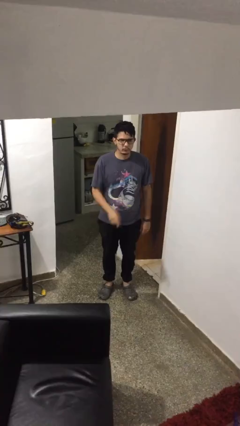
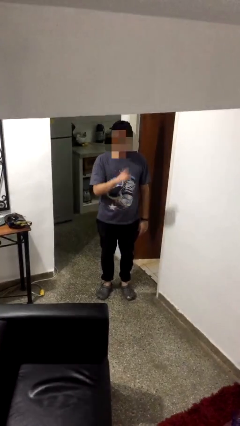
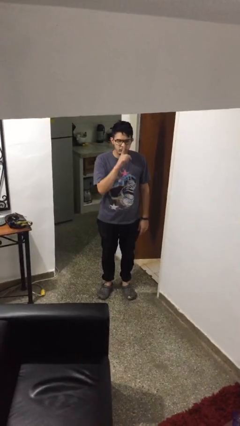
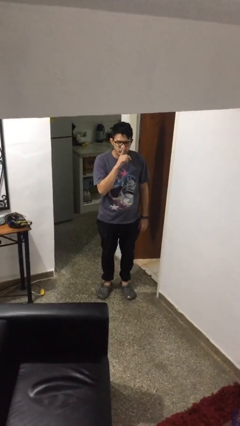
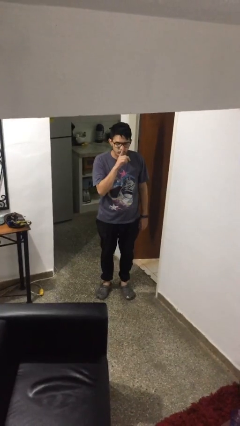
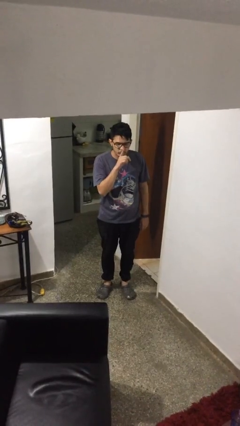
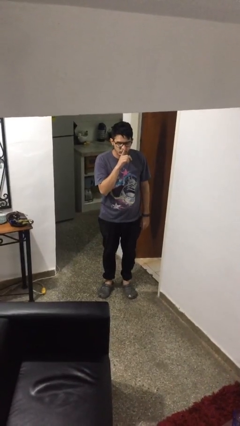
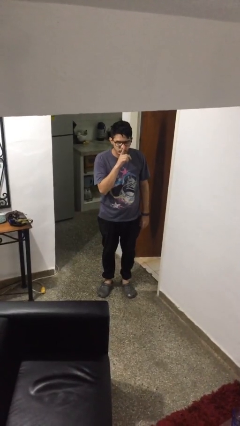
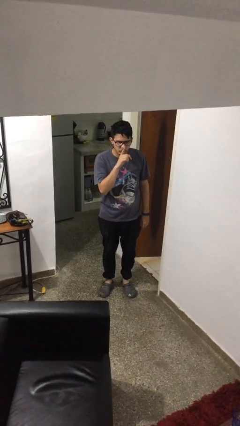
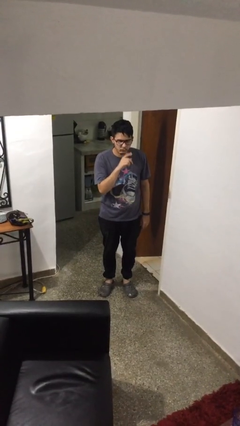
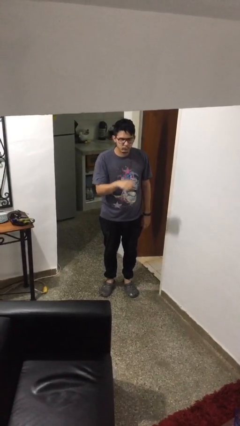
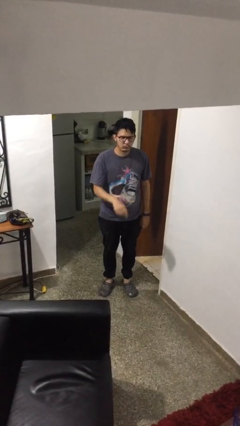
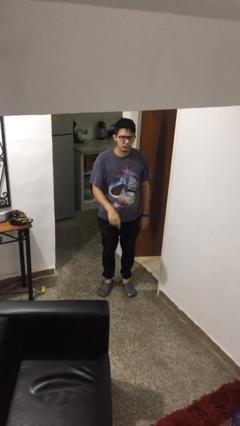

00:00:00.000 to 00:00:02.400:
person gestures be quiet

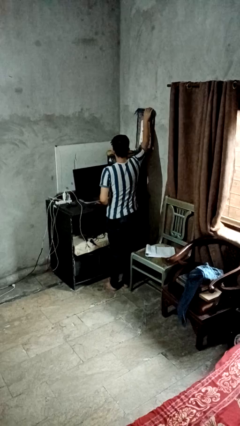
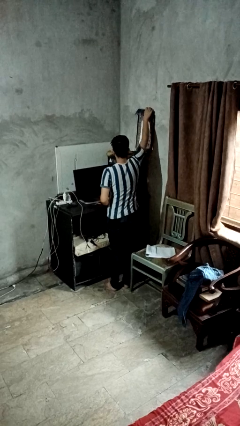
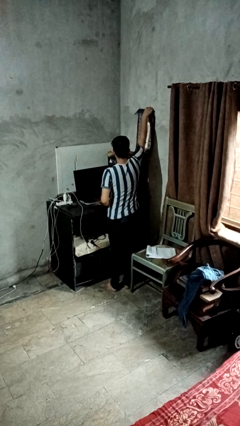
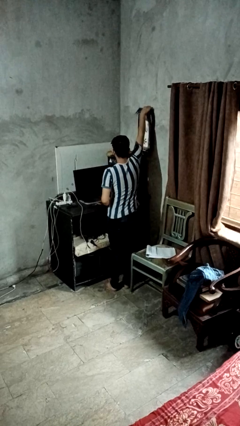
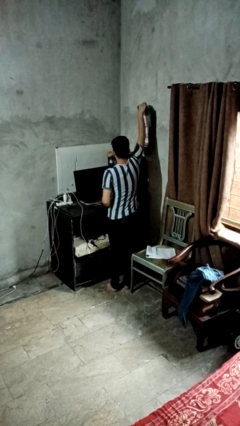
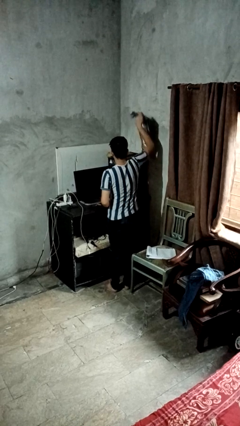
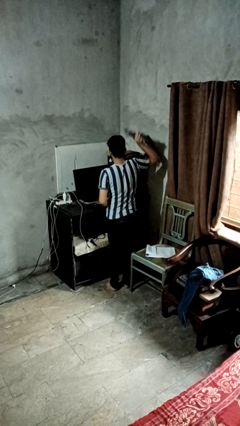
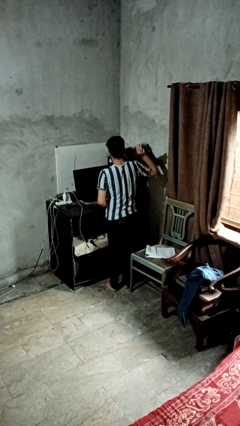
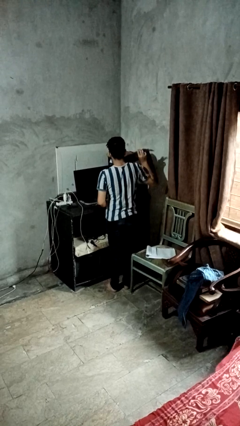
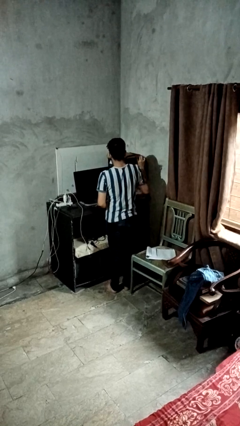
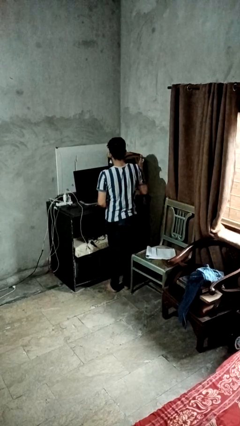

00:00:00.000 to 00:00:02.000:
person takes down picture frame

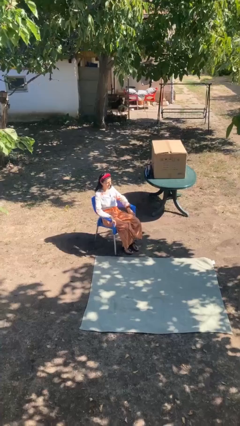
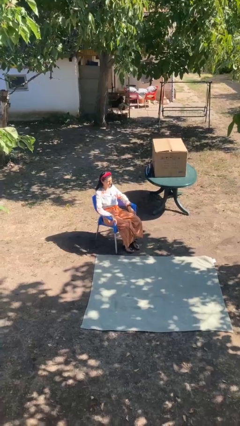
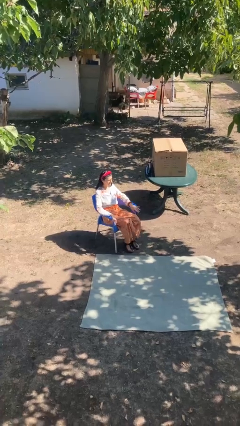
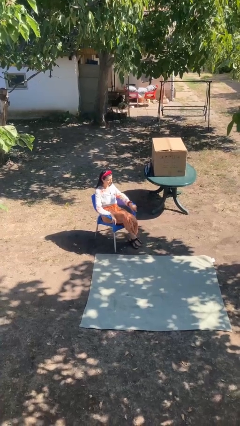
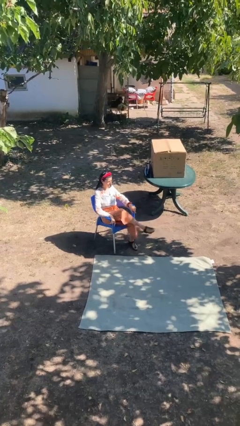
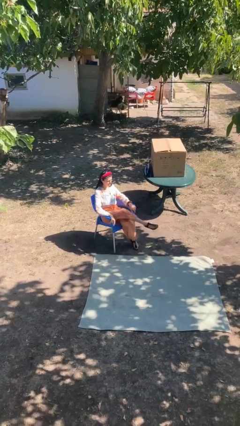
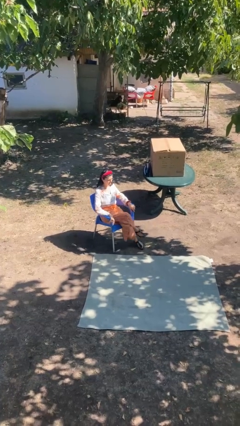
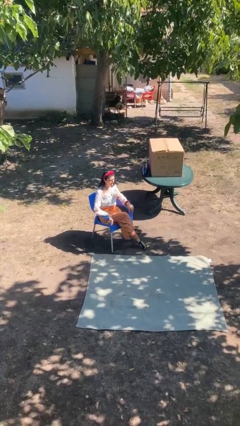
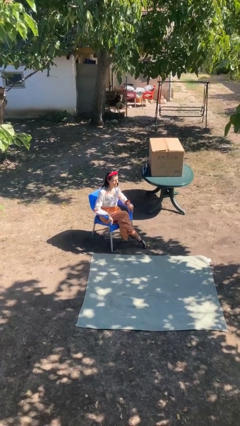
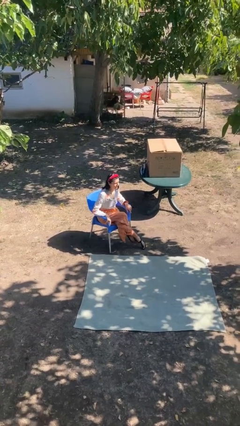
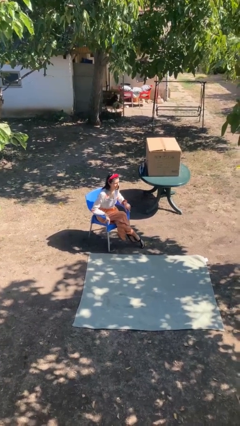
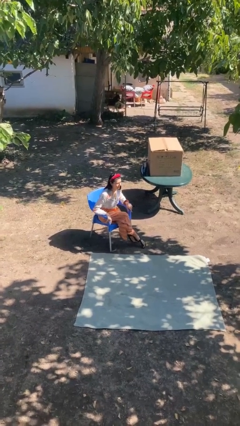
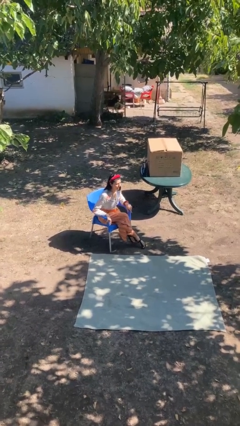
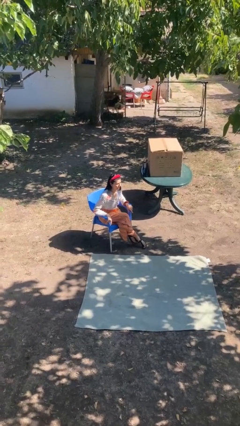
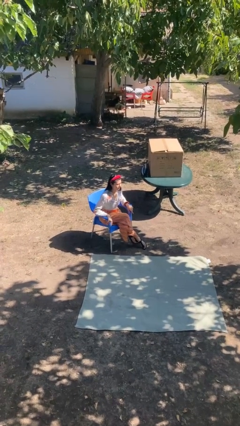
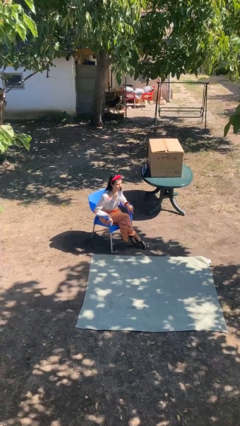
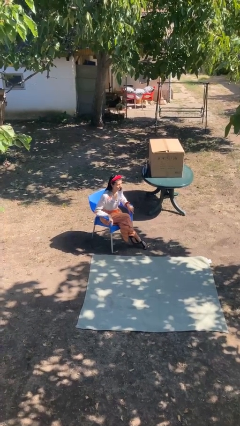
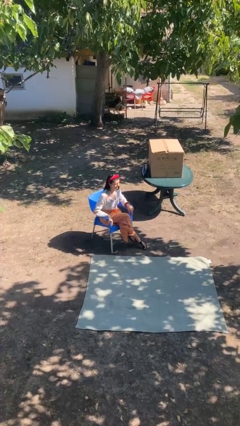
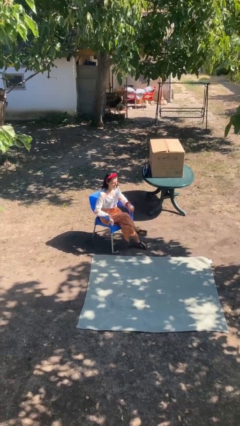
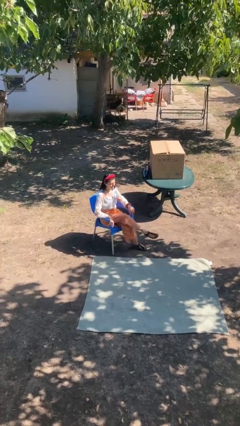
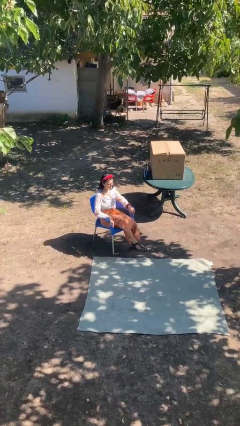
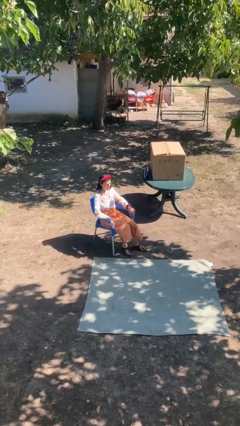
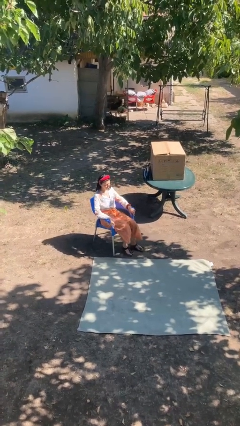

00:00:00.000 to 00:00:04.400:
person crosses legs

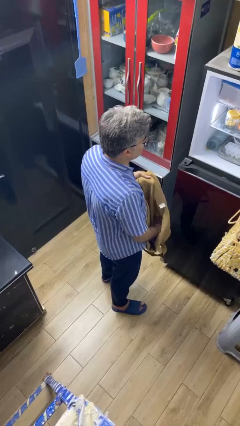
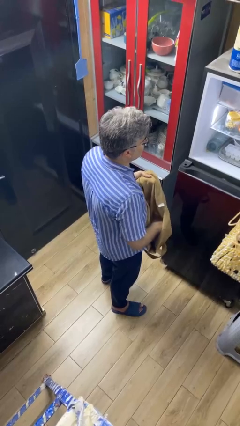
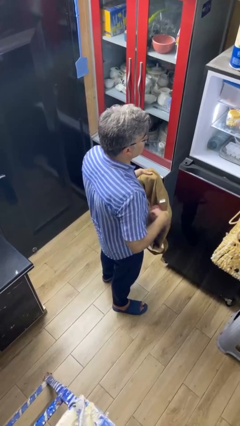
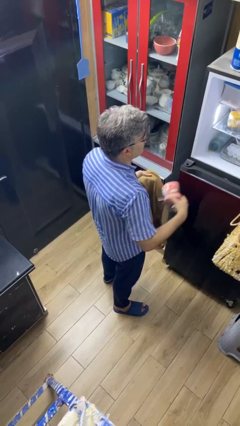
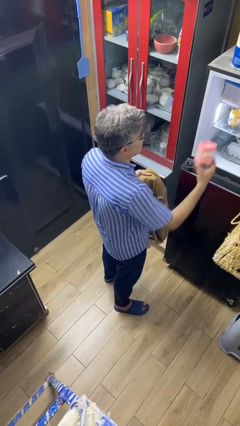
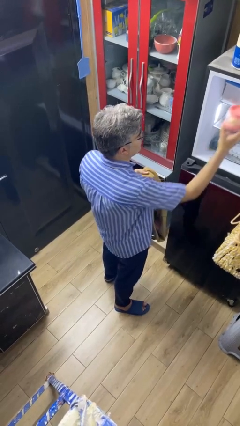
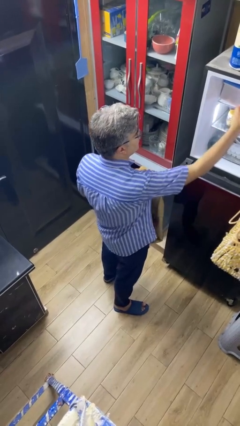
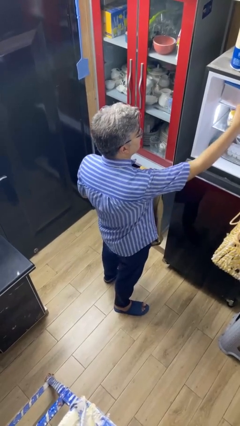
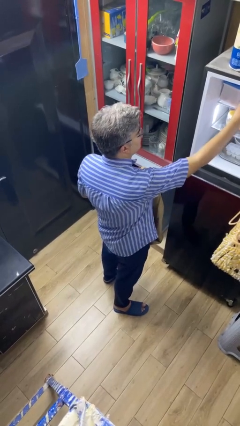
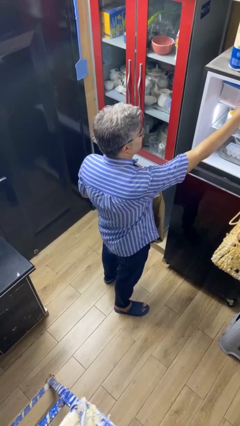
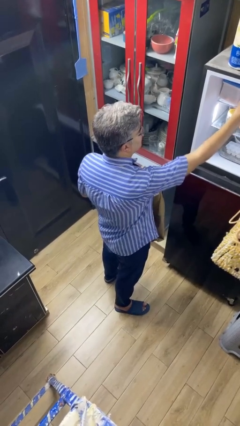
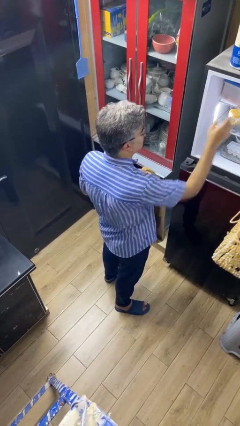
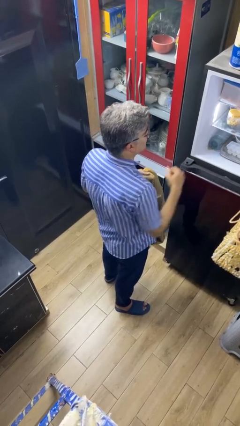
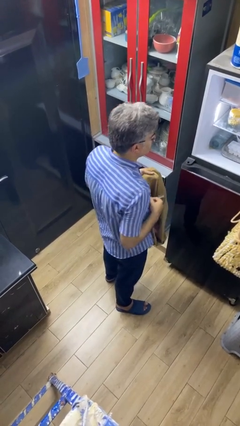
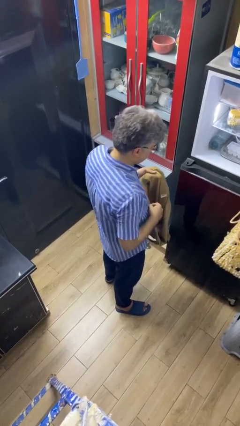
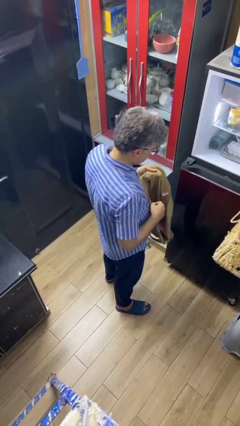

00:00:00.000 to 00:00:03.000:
person loads groceries into refrigerator

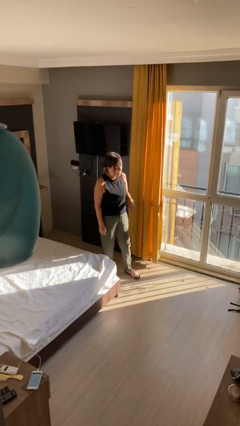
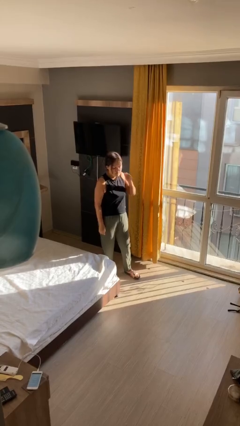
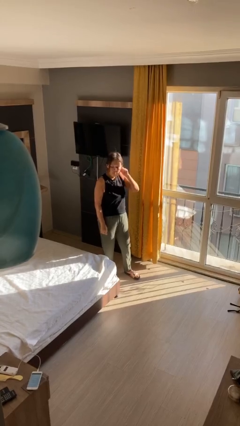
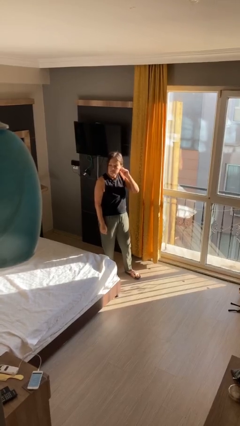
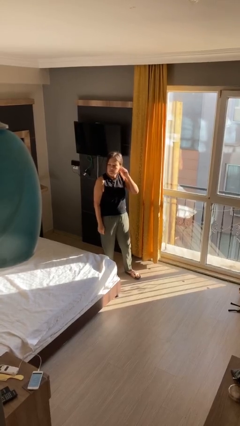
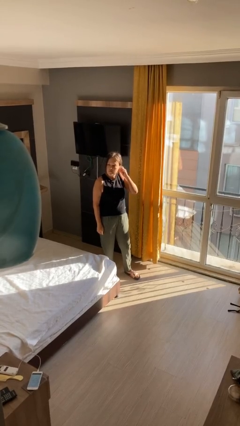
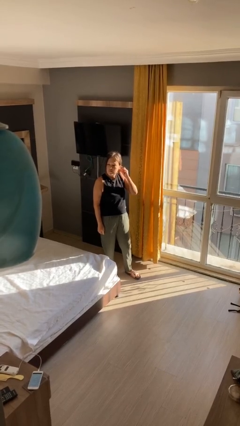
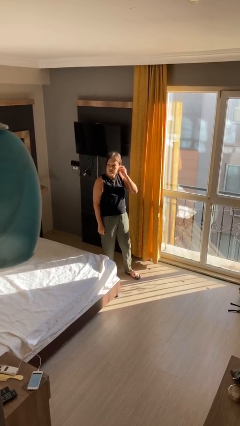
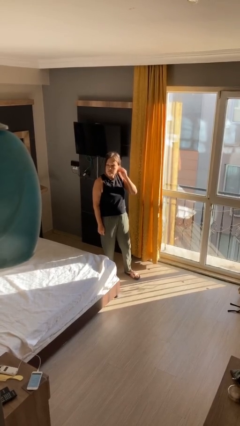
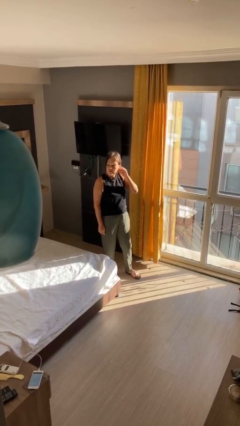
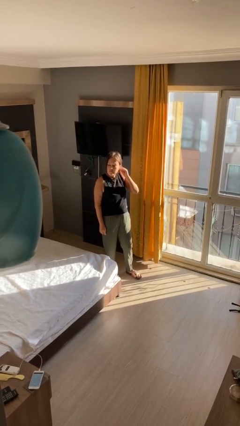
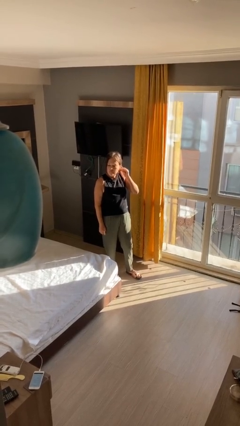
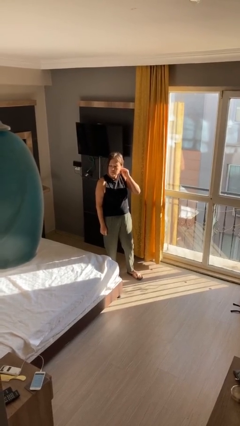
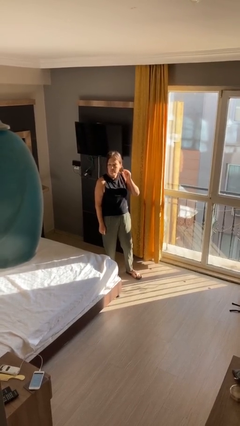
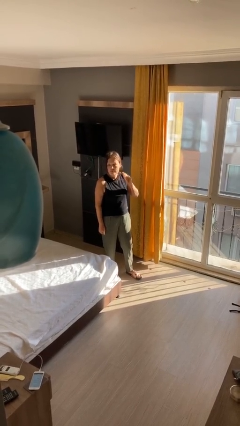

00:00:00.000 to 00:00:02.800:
person touches earlobe

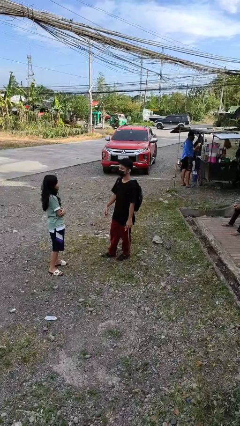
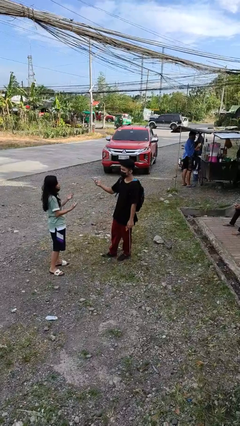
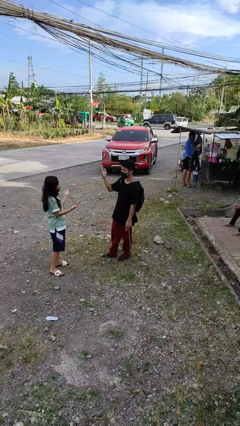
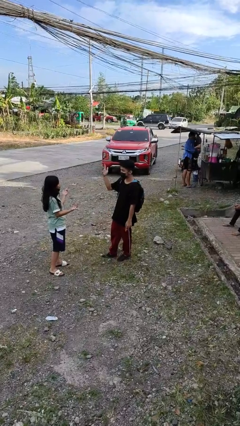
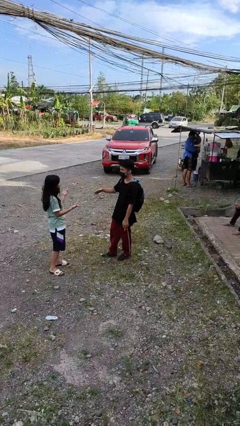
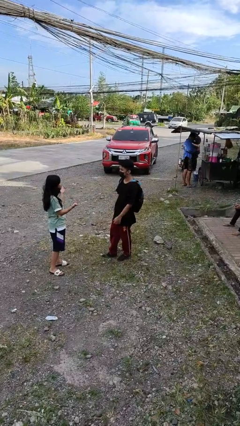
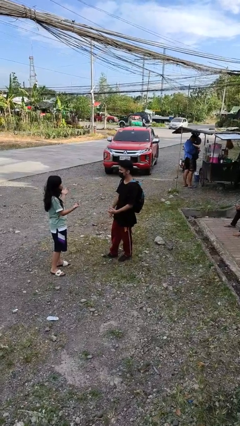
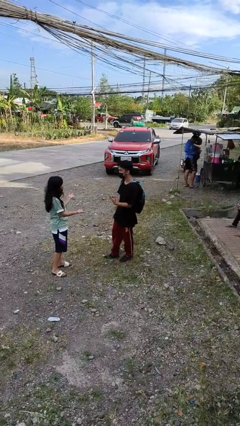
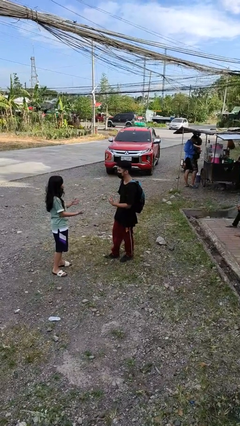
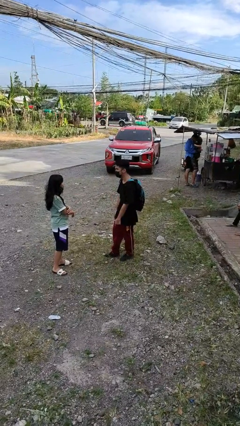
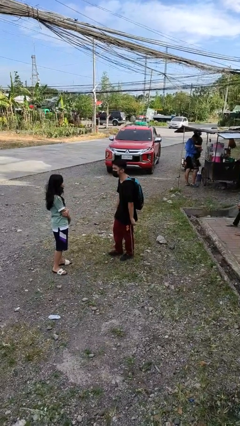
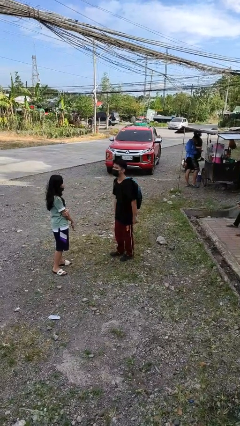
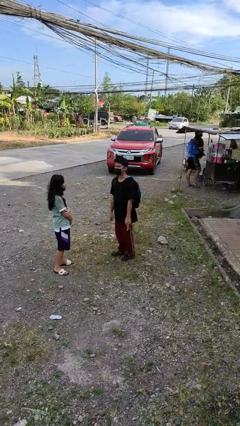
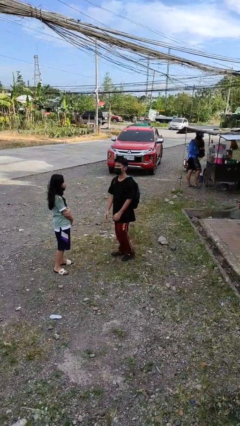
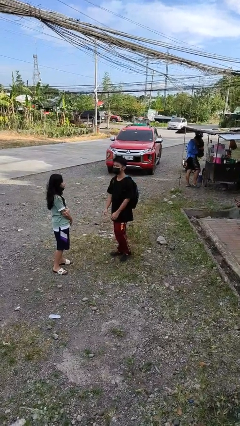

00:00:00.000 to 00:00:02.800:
person talks to person
